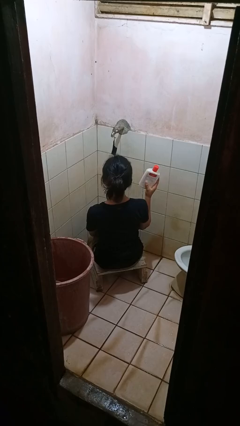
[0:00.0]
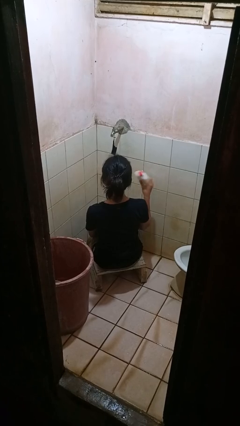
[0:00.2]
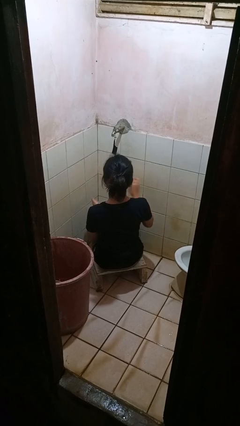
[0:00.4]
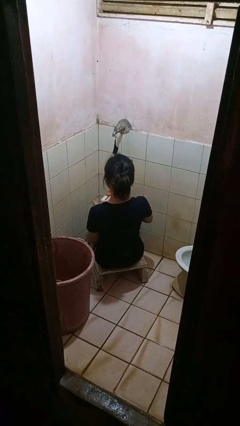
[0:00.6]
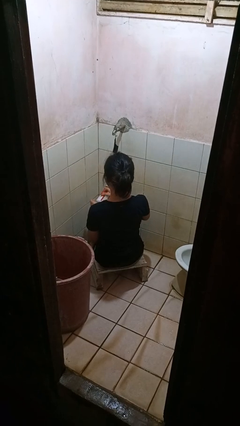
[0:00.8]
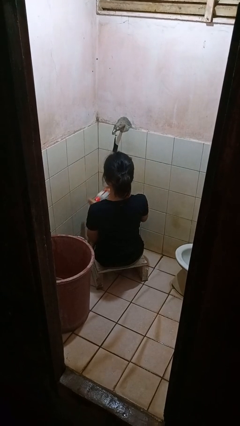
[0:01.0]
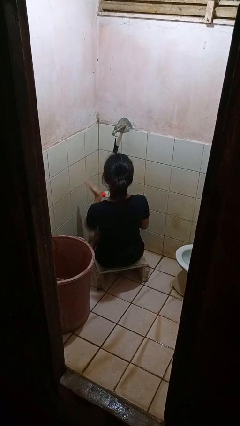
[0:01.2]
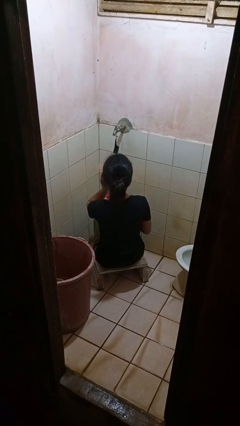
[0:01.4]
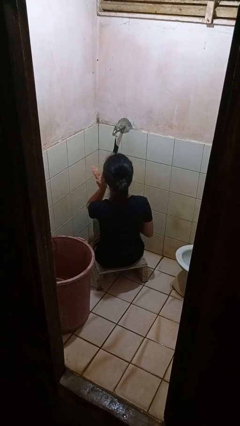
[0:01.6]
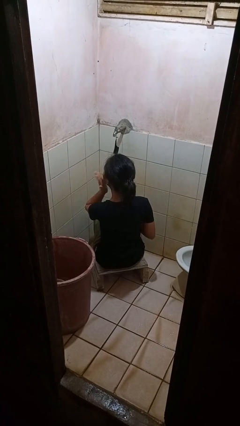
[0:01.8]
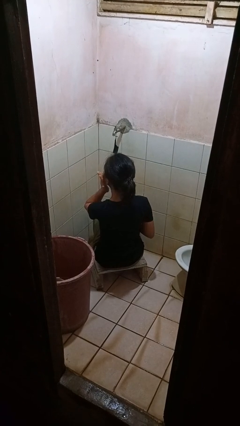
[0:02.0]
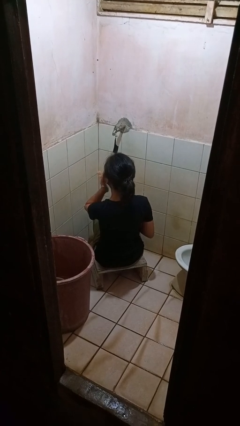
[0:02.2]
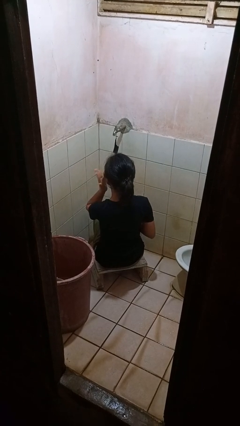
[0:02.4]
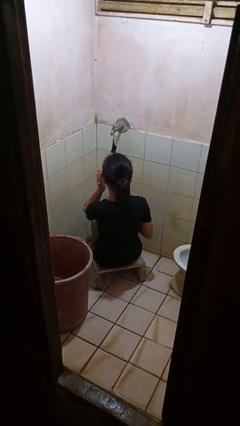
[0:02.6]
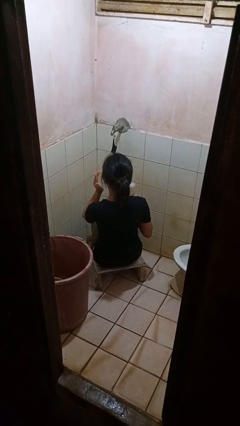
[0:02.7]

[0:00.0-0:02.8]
person applies facial moisturizer

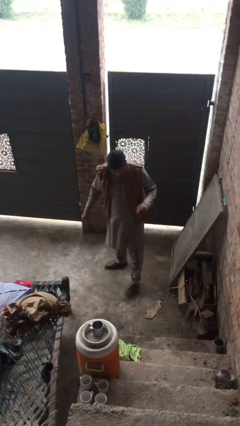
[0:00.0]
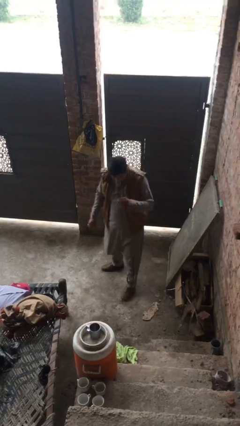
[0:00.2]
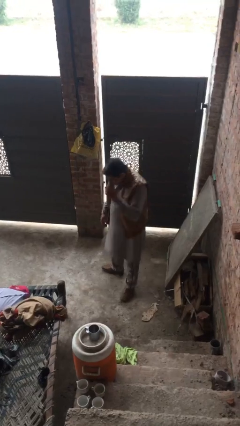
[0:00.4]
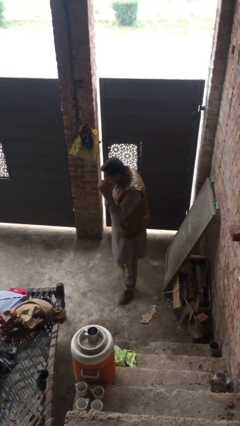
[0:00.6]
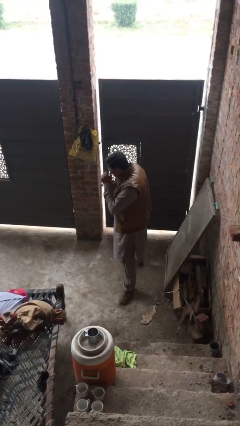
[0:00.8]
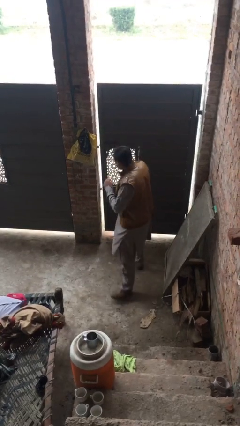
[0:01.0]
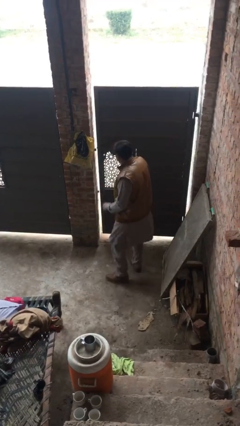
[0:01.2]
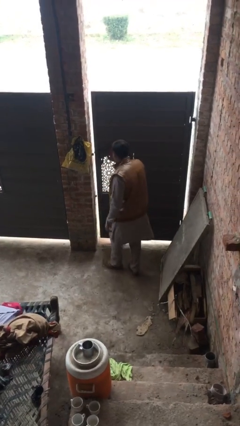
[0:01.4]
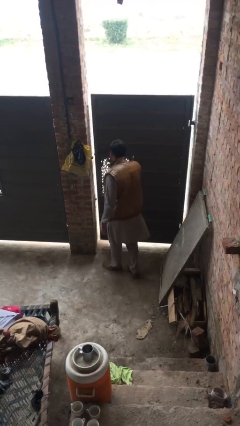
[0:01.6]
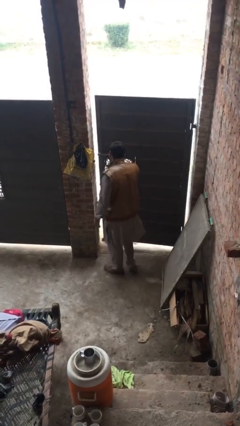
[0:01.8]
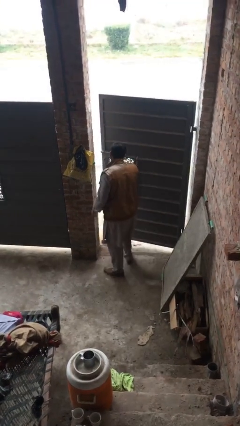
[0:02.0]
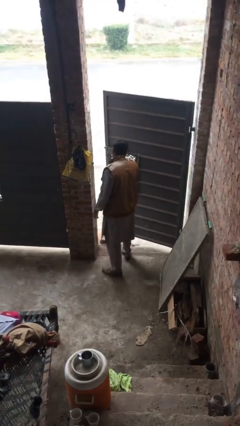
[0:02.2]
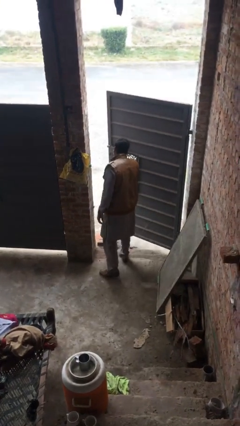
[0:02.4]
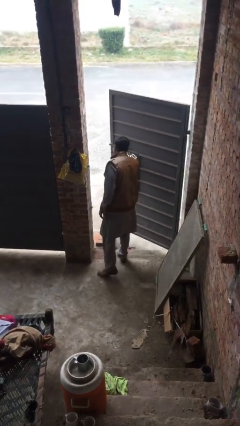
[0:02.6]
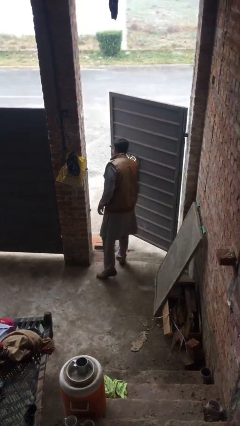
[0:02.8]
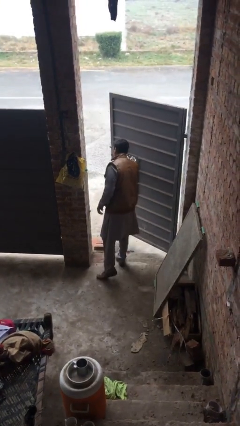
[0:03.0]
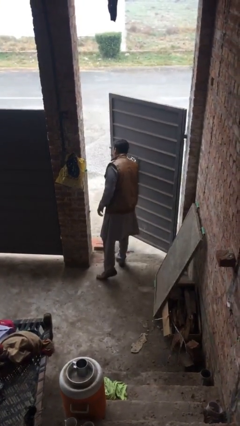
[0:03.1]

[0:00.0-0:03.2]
person opens facility door

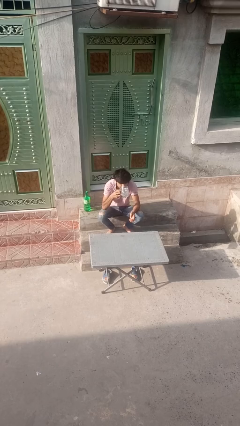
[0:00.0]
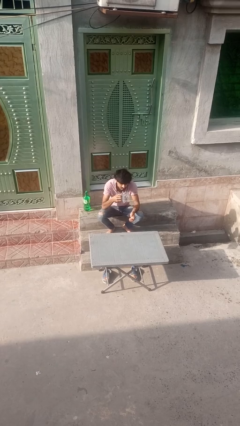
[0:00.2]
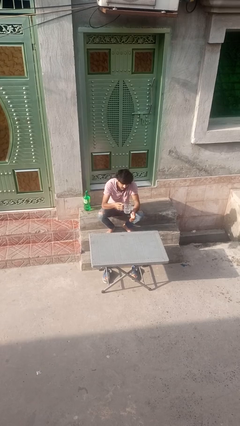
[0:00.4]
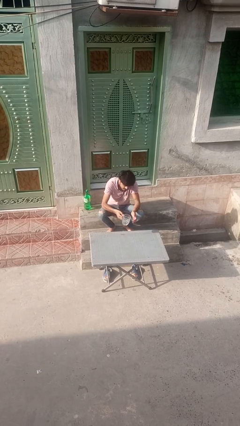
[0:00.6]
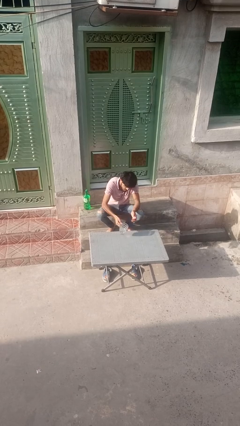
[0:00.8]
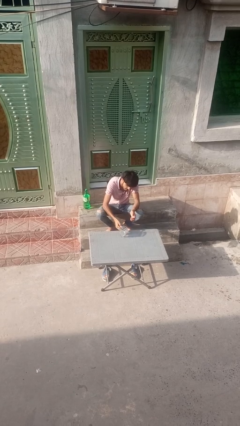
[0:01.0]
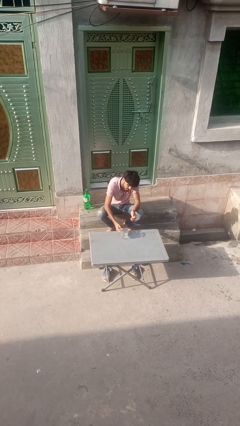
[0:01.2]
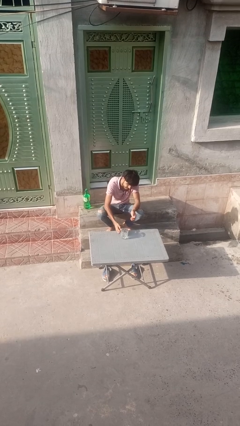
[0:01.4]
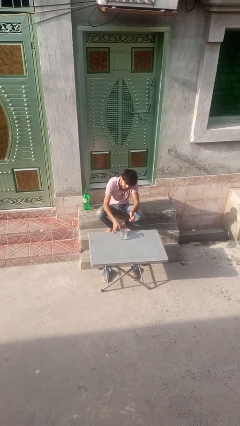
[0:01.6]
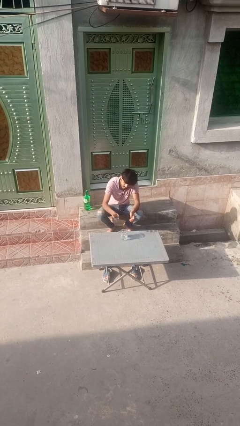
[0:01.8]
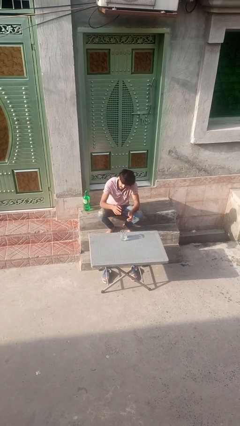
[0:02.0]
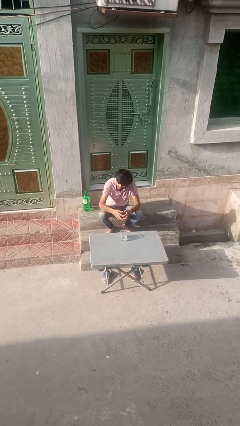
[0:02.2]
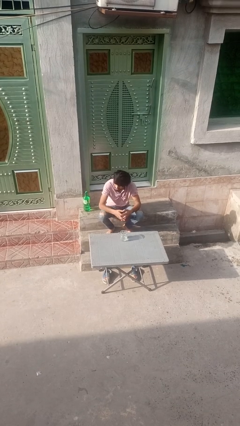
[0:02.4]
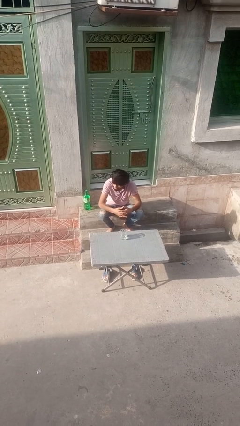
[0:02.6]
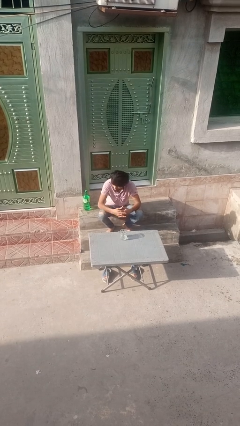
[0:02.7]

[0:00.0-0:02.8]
person puts down object on table

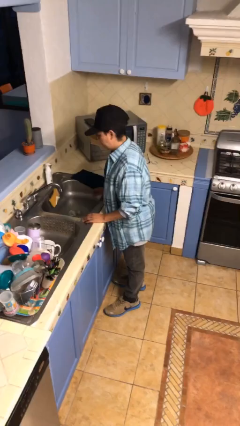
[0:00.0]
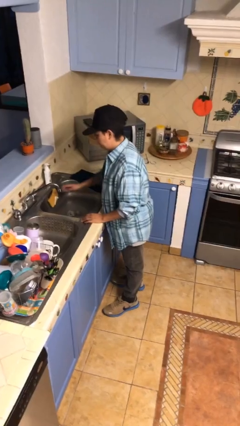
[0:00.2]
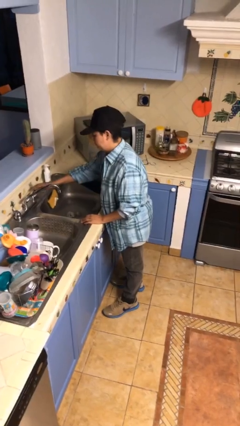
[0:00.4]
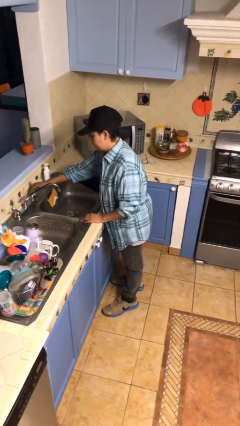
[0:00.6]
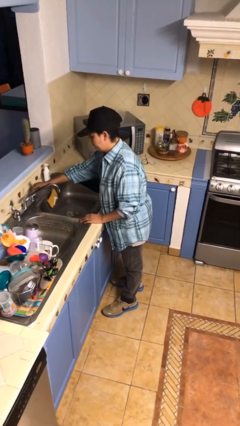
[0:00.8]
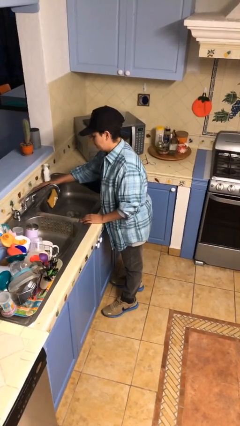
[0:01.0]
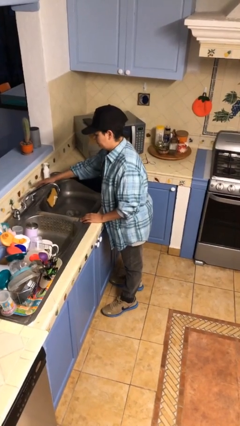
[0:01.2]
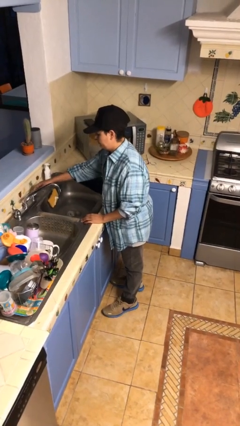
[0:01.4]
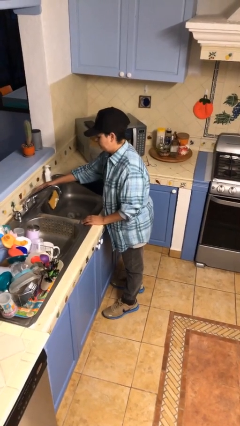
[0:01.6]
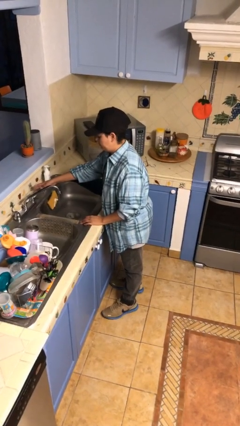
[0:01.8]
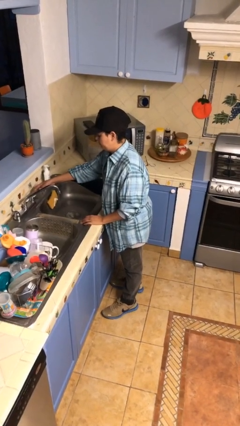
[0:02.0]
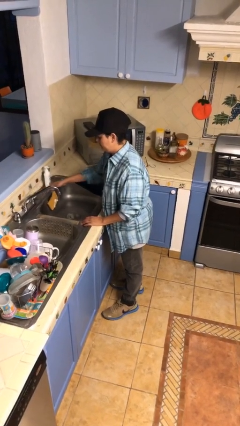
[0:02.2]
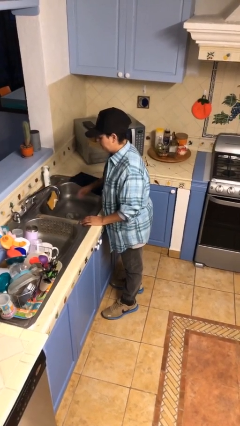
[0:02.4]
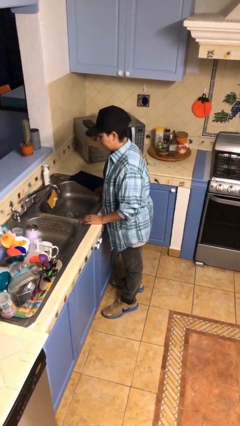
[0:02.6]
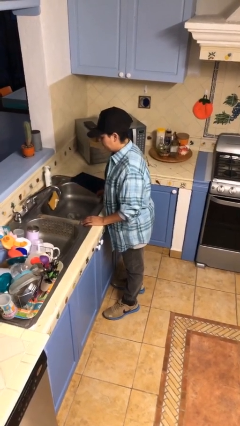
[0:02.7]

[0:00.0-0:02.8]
person turns on faucet

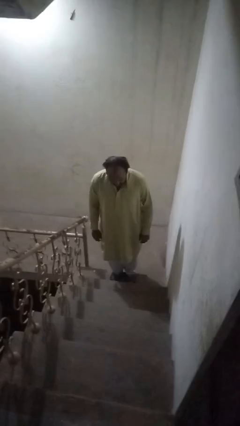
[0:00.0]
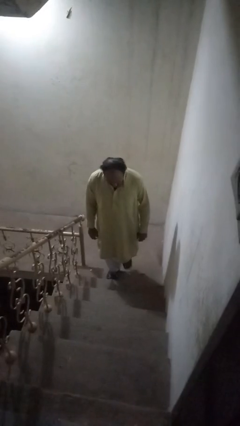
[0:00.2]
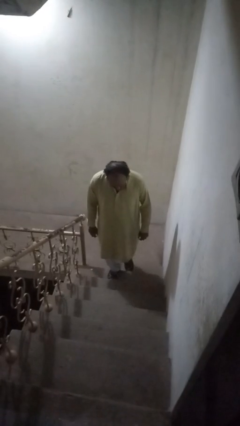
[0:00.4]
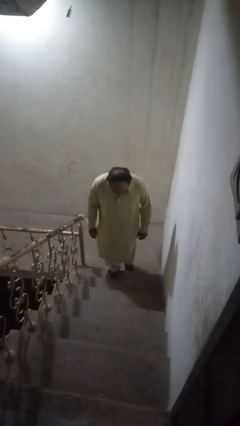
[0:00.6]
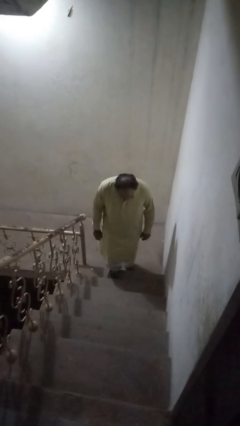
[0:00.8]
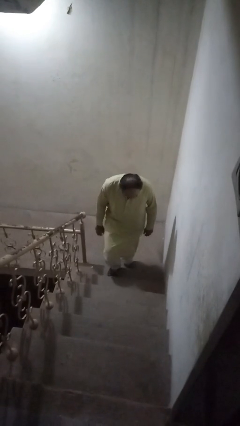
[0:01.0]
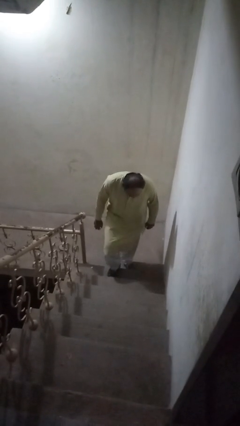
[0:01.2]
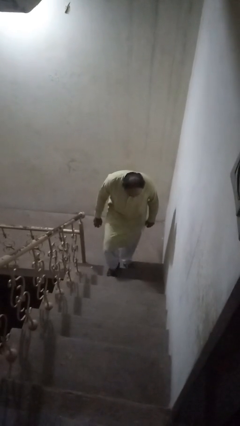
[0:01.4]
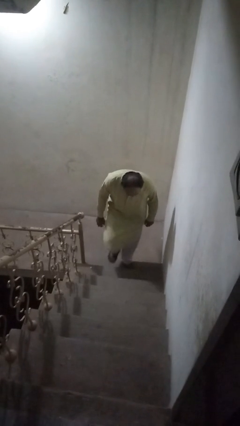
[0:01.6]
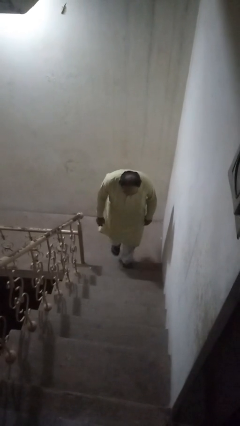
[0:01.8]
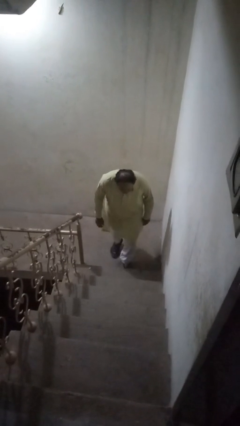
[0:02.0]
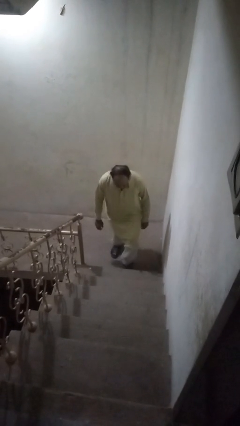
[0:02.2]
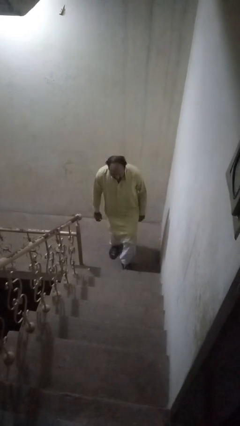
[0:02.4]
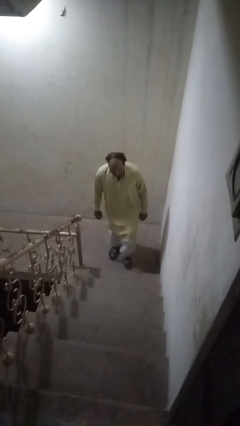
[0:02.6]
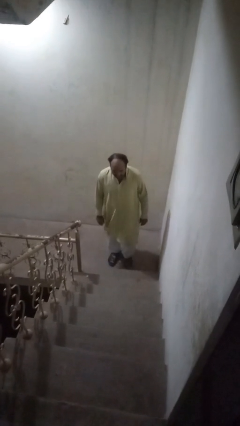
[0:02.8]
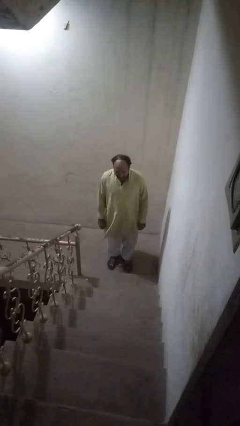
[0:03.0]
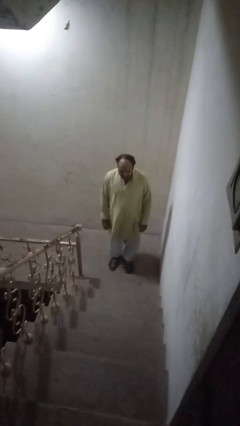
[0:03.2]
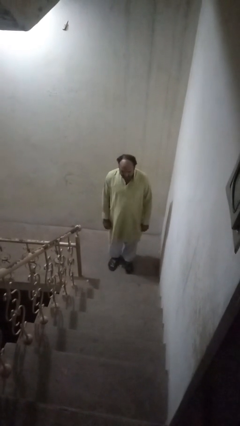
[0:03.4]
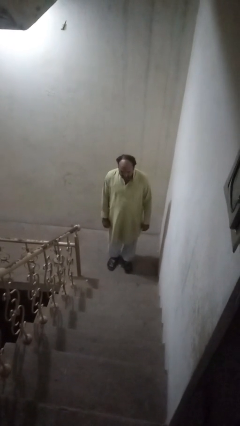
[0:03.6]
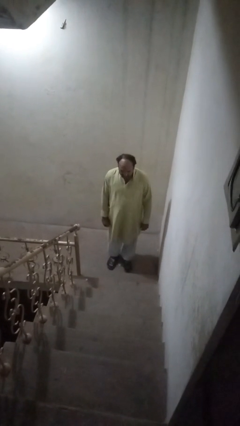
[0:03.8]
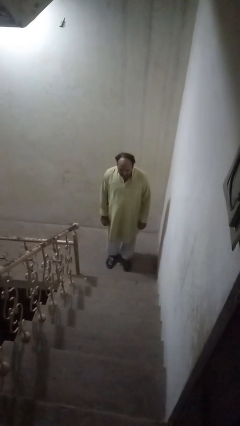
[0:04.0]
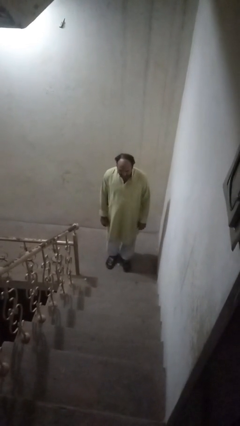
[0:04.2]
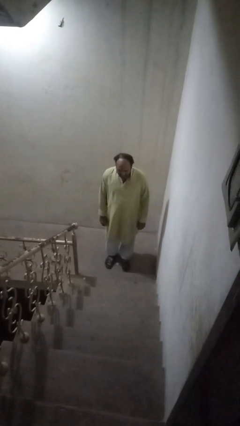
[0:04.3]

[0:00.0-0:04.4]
person climbs down ladder

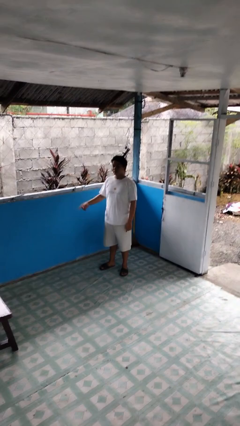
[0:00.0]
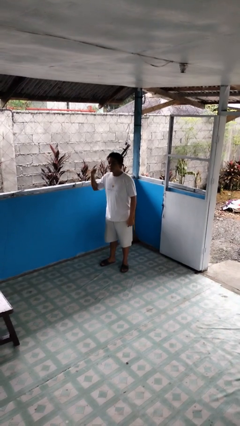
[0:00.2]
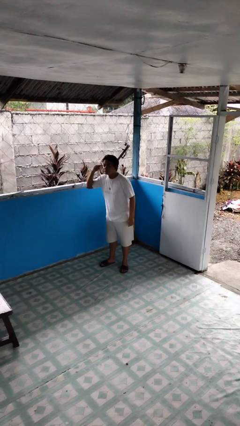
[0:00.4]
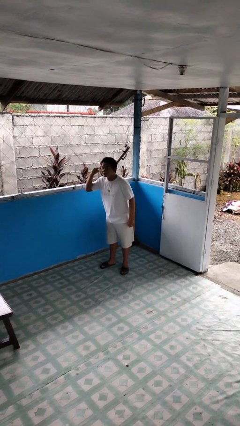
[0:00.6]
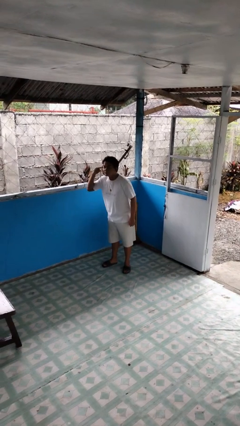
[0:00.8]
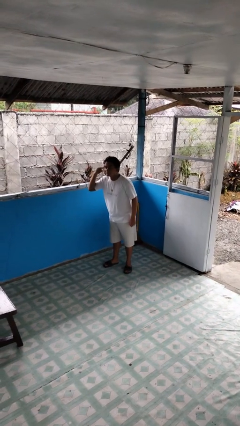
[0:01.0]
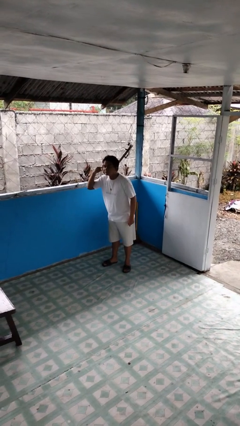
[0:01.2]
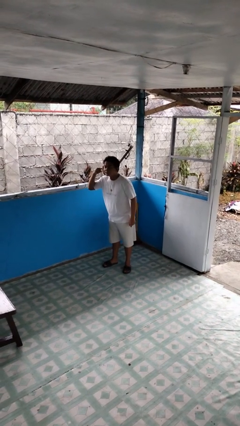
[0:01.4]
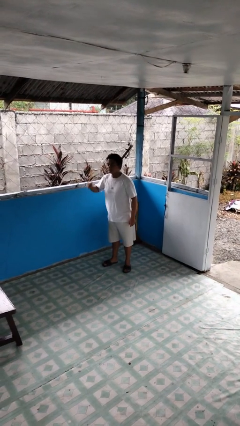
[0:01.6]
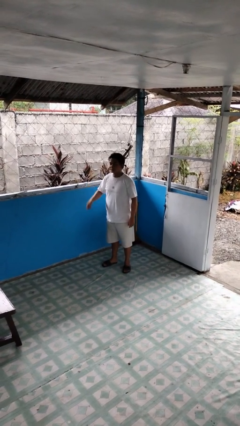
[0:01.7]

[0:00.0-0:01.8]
person gestures listen closely
